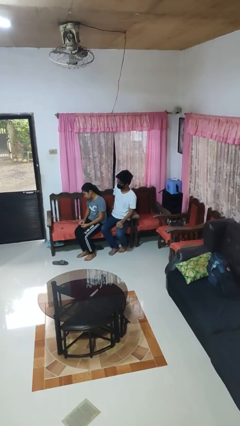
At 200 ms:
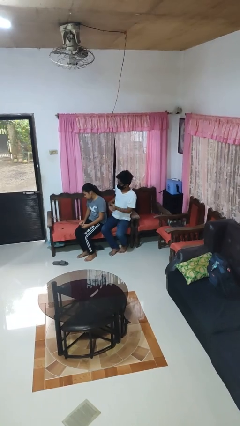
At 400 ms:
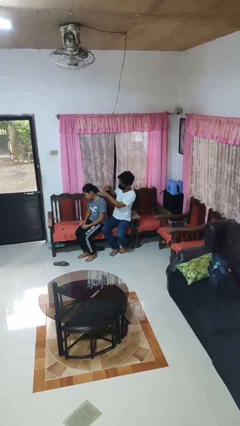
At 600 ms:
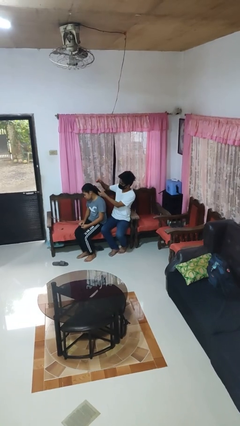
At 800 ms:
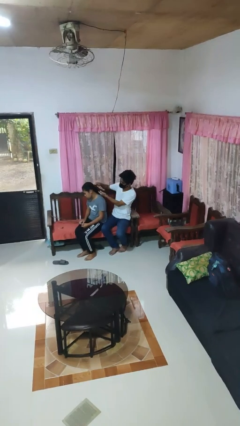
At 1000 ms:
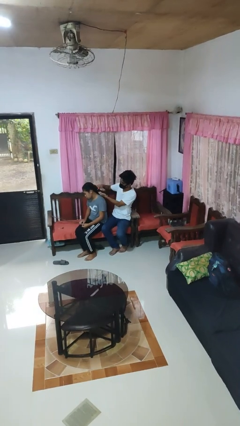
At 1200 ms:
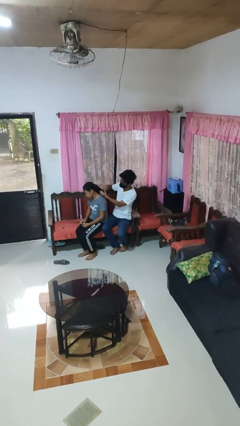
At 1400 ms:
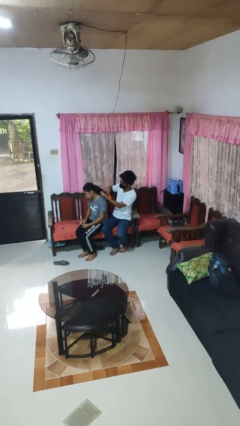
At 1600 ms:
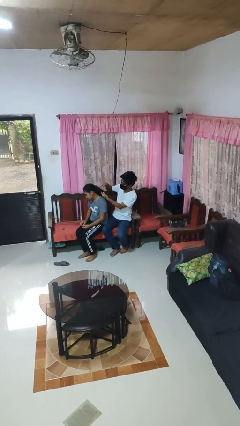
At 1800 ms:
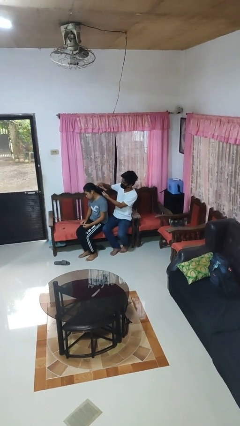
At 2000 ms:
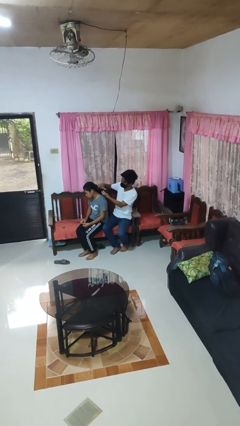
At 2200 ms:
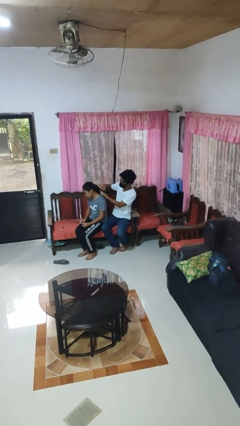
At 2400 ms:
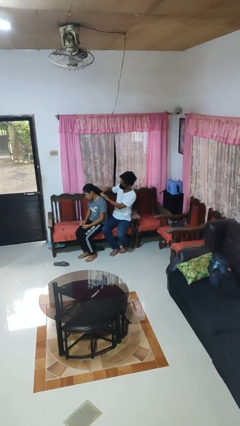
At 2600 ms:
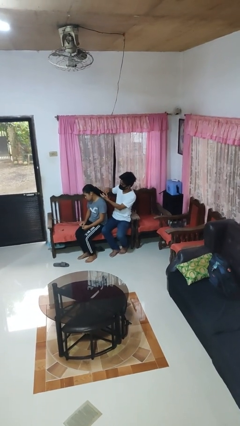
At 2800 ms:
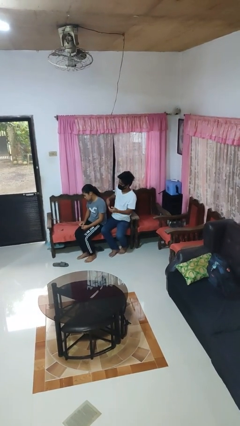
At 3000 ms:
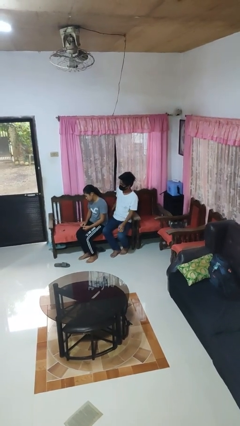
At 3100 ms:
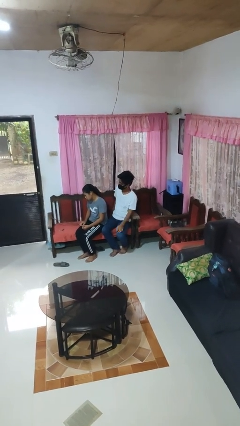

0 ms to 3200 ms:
person brushes hair of person

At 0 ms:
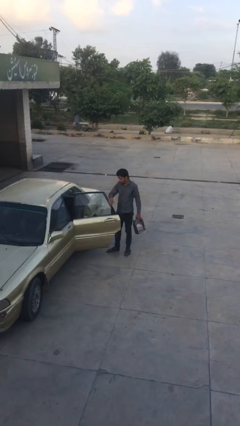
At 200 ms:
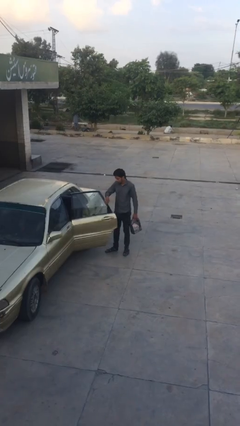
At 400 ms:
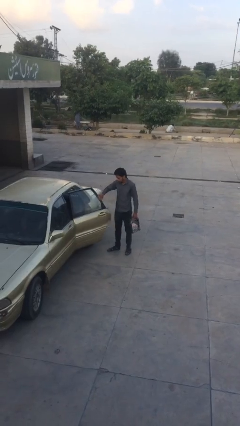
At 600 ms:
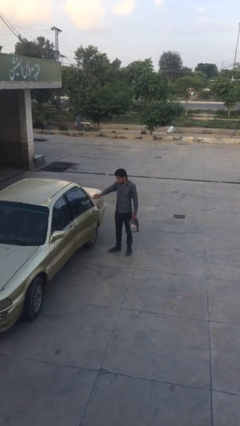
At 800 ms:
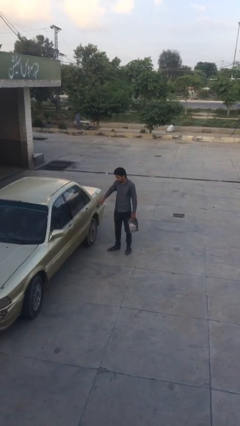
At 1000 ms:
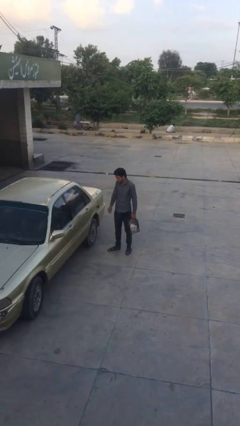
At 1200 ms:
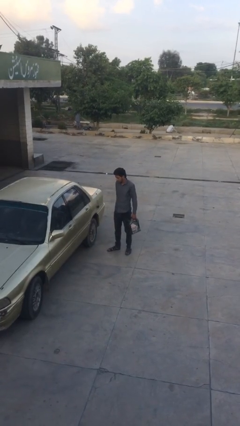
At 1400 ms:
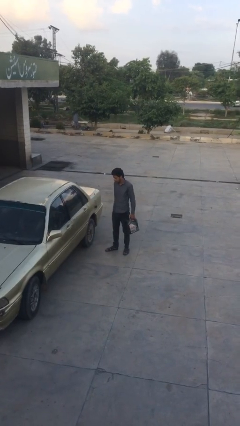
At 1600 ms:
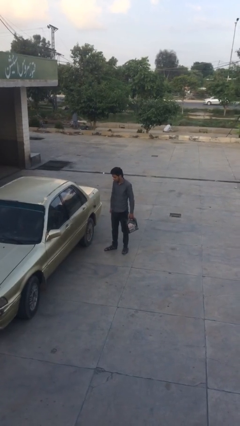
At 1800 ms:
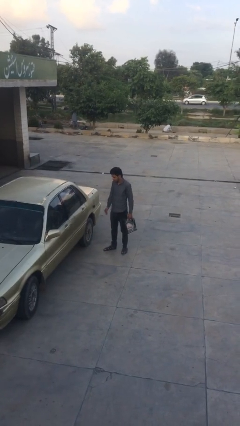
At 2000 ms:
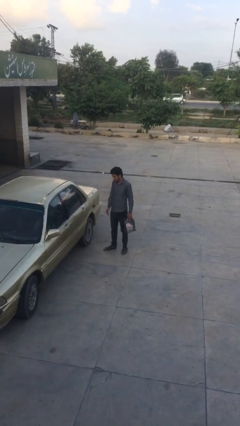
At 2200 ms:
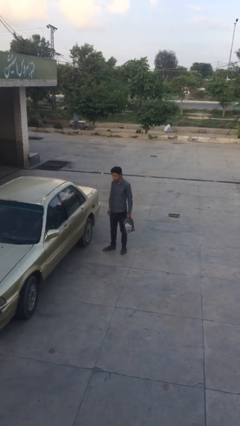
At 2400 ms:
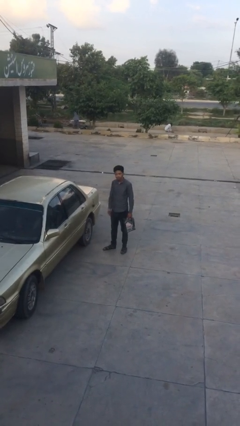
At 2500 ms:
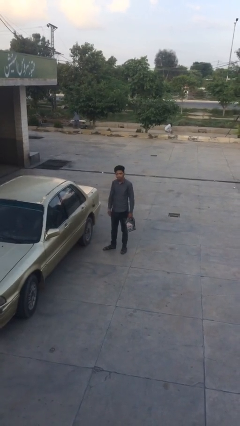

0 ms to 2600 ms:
person closes car door

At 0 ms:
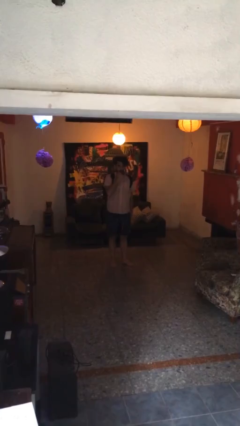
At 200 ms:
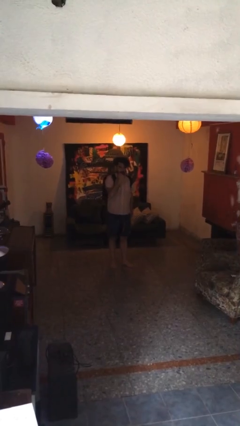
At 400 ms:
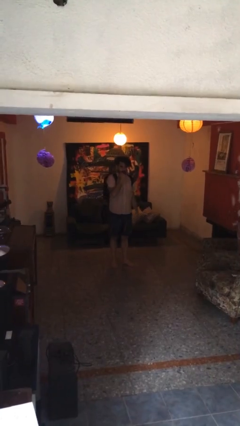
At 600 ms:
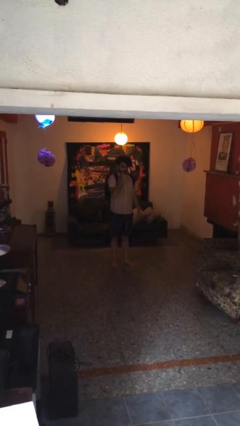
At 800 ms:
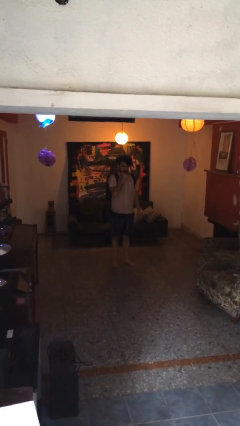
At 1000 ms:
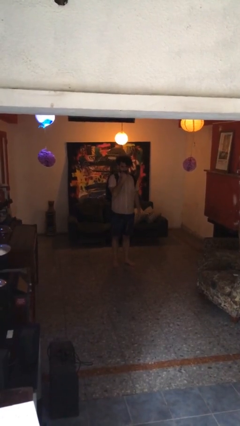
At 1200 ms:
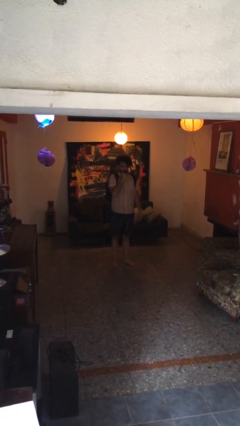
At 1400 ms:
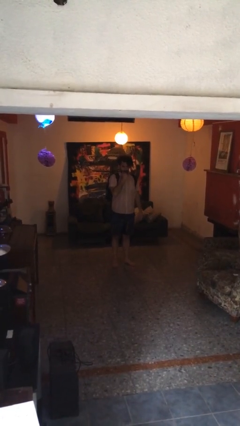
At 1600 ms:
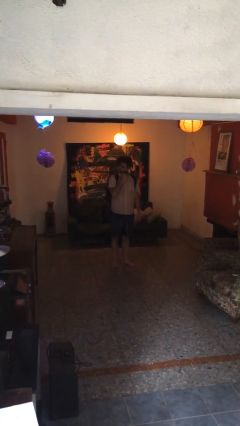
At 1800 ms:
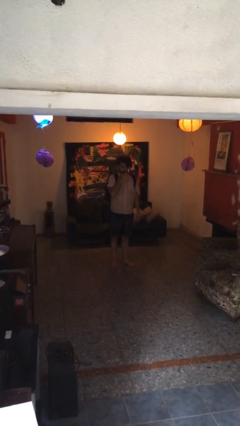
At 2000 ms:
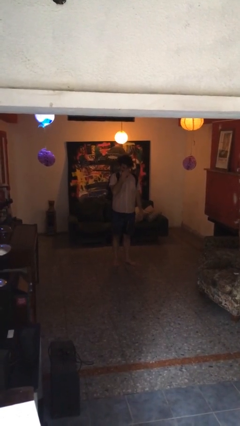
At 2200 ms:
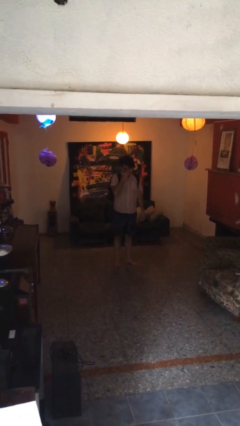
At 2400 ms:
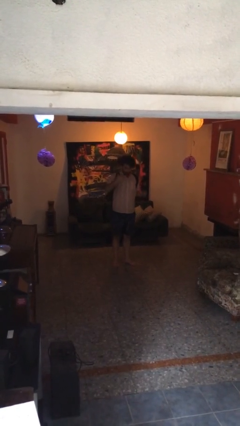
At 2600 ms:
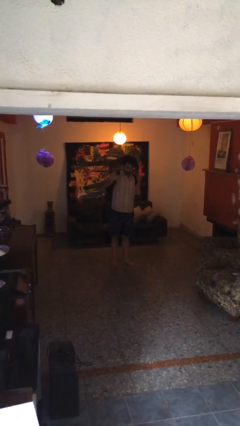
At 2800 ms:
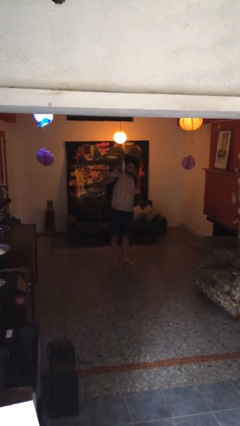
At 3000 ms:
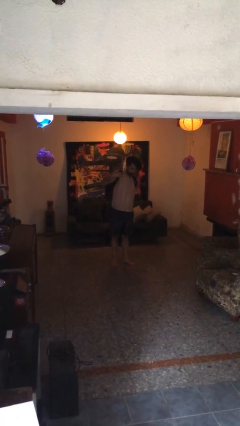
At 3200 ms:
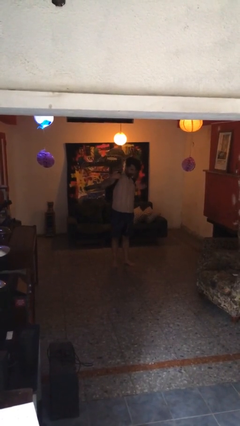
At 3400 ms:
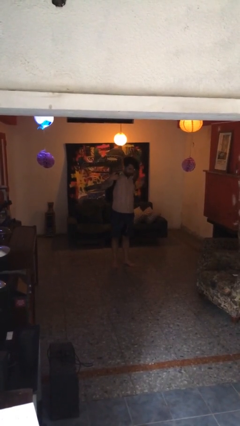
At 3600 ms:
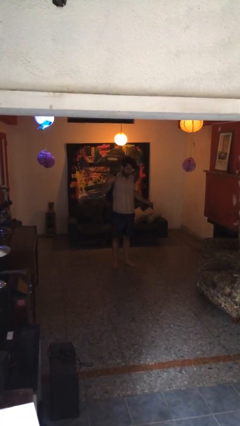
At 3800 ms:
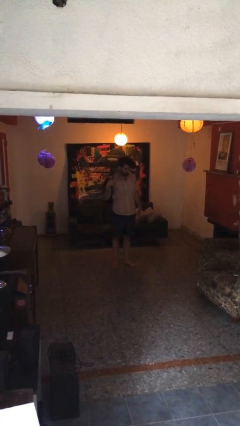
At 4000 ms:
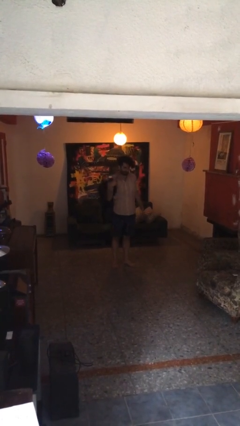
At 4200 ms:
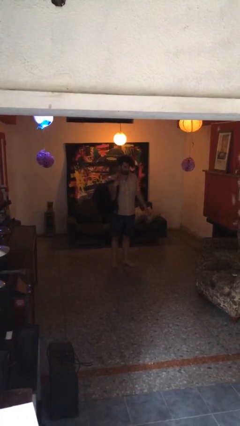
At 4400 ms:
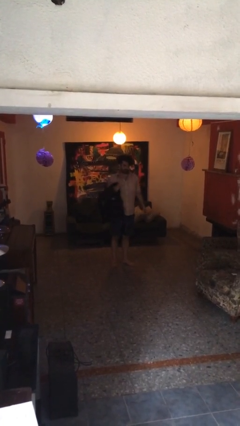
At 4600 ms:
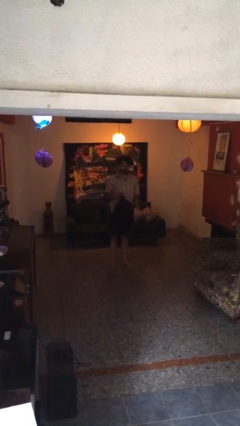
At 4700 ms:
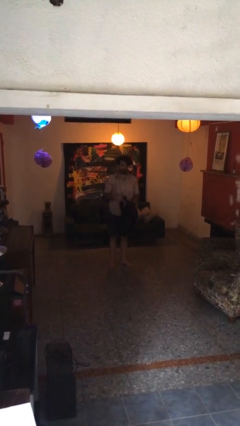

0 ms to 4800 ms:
person takes off backpack

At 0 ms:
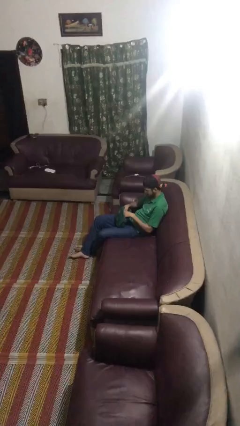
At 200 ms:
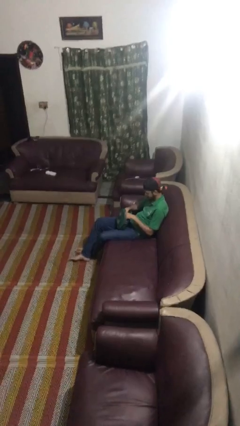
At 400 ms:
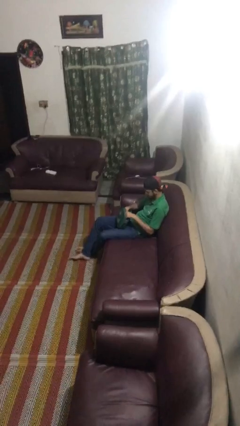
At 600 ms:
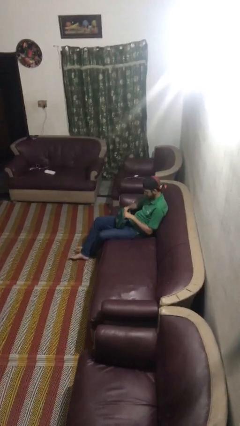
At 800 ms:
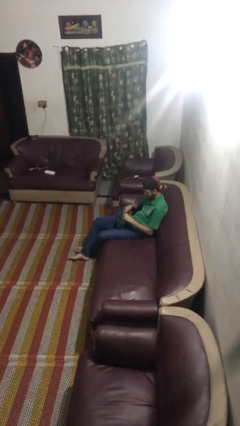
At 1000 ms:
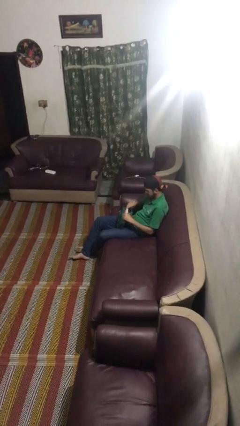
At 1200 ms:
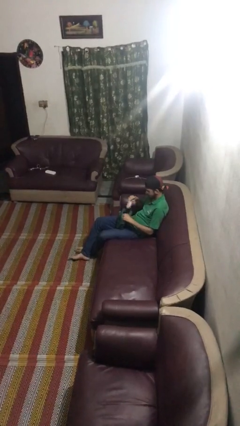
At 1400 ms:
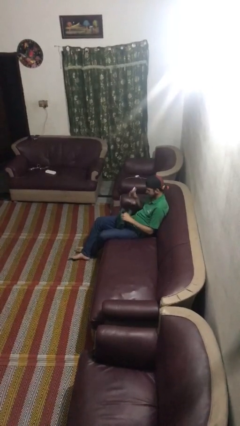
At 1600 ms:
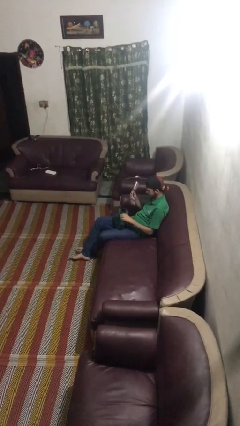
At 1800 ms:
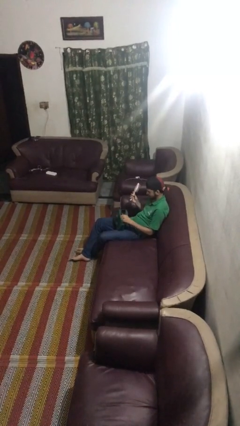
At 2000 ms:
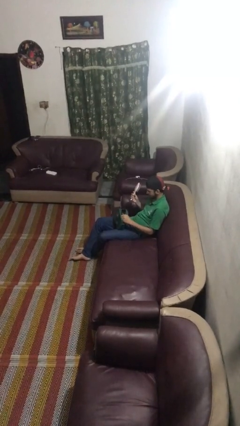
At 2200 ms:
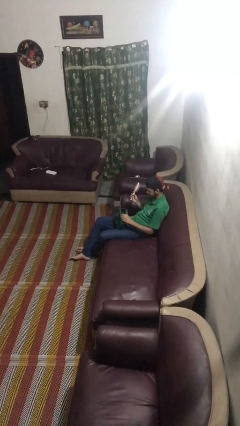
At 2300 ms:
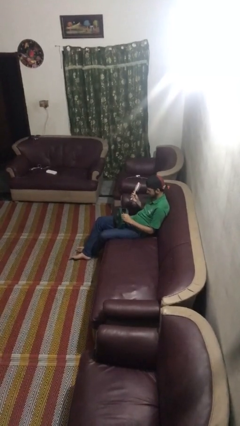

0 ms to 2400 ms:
person takes object from purse

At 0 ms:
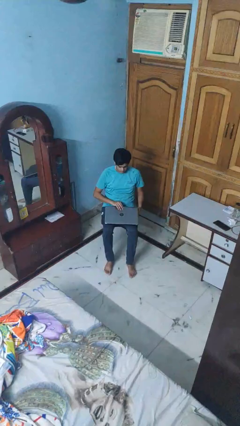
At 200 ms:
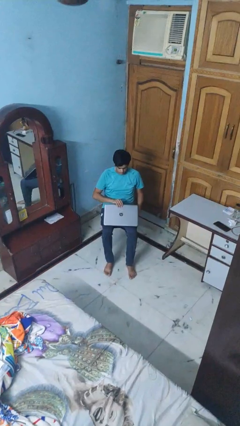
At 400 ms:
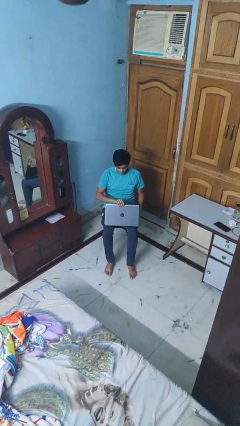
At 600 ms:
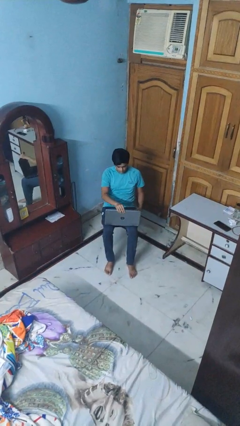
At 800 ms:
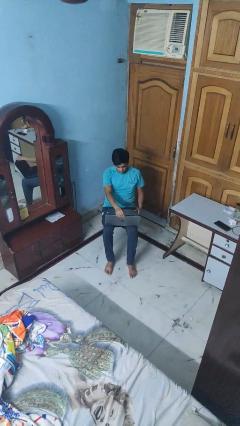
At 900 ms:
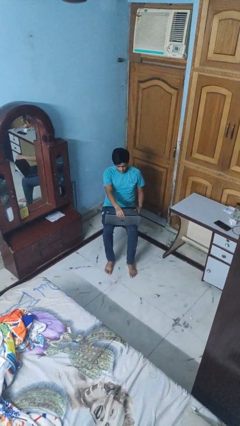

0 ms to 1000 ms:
person opens laptop

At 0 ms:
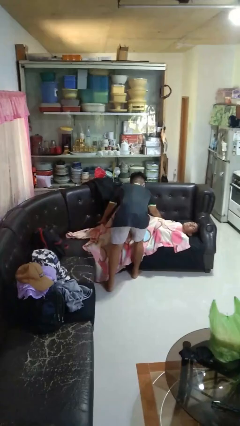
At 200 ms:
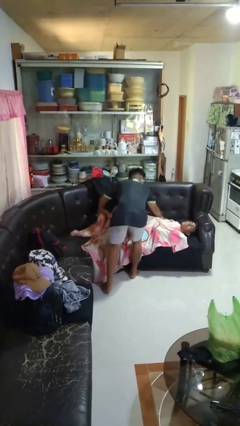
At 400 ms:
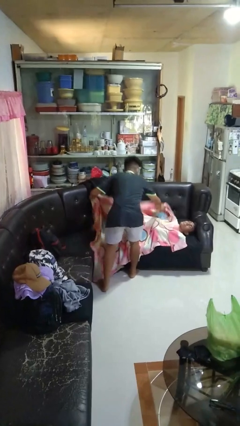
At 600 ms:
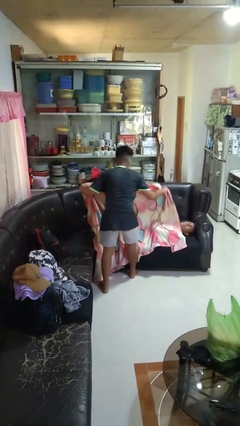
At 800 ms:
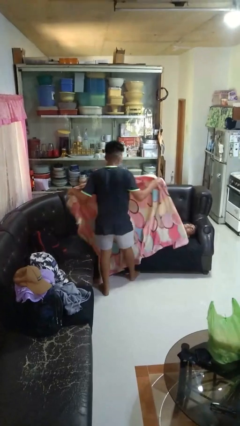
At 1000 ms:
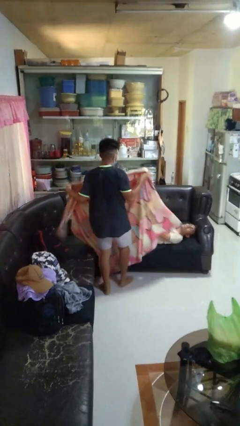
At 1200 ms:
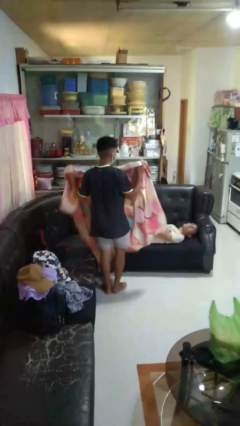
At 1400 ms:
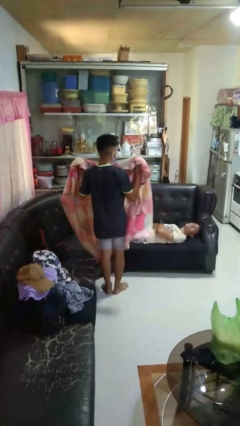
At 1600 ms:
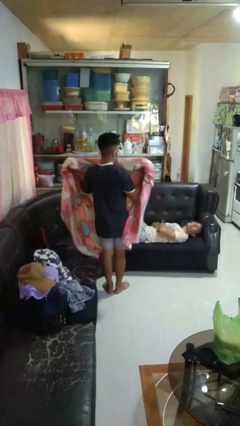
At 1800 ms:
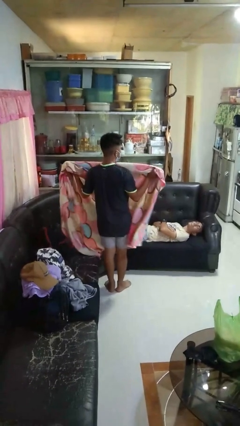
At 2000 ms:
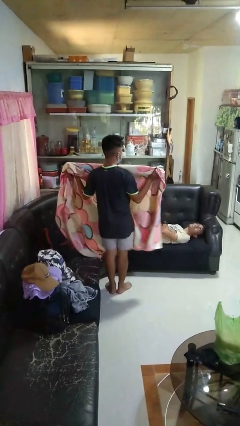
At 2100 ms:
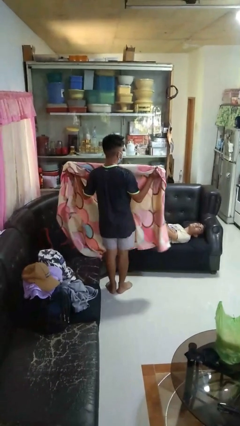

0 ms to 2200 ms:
person uncovers friend with blanket

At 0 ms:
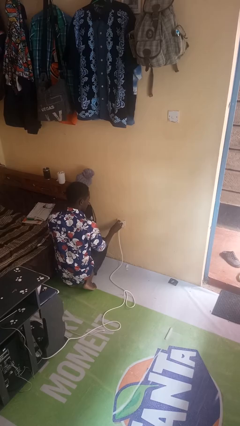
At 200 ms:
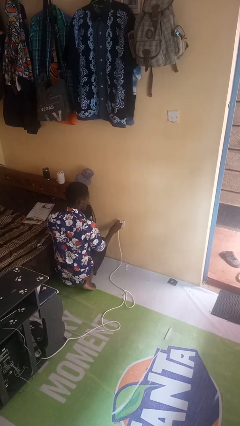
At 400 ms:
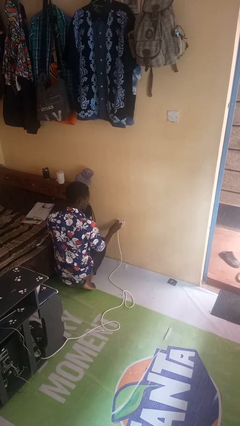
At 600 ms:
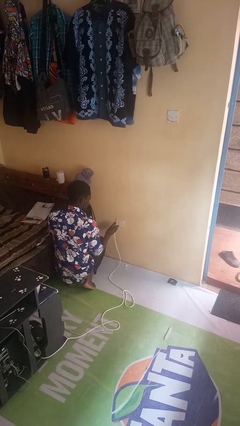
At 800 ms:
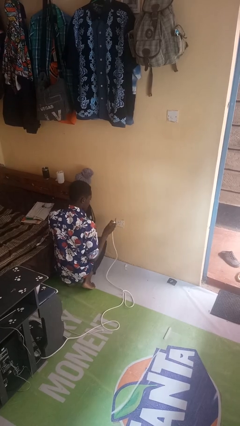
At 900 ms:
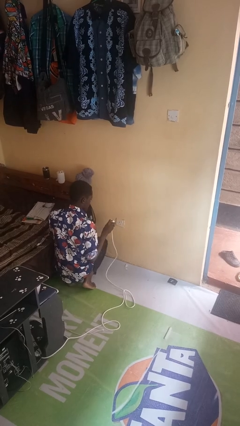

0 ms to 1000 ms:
person unplugs from electrical socket

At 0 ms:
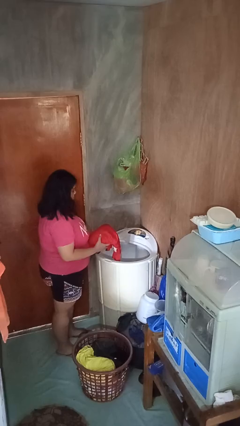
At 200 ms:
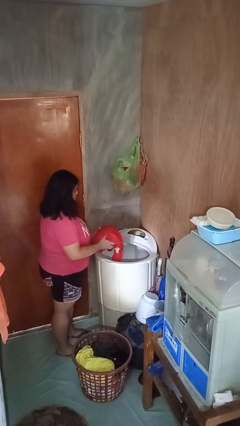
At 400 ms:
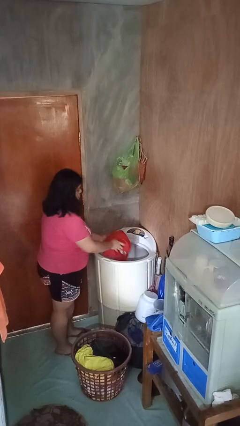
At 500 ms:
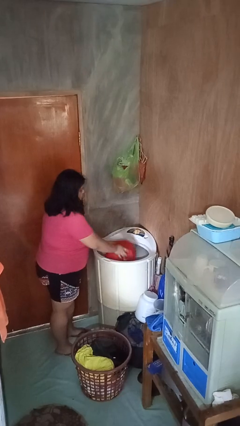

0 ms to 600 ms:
person loads dryer
